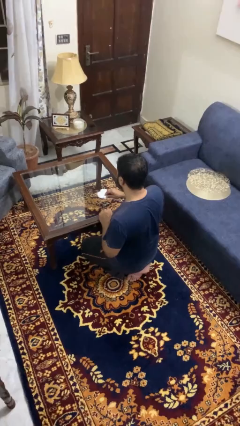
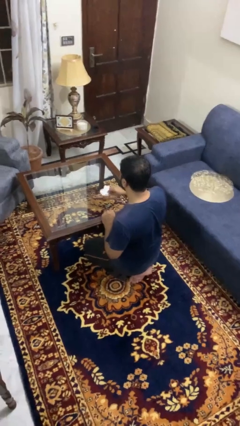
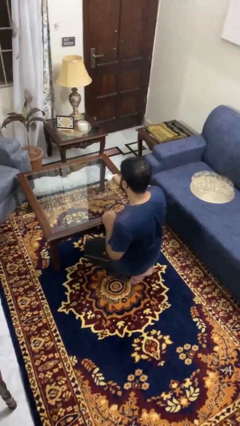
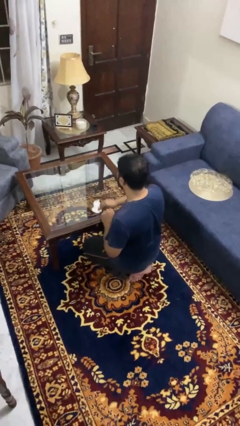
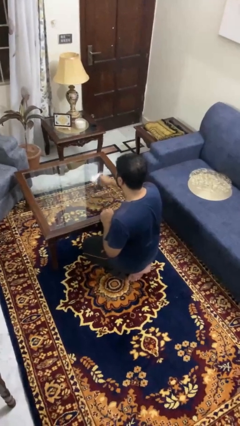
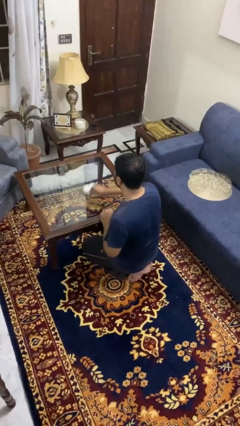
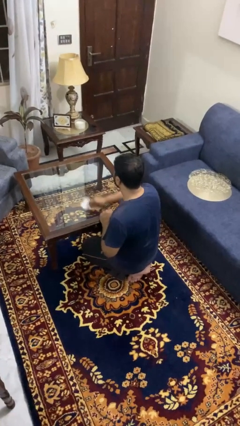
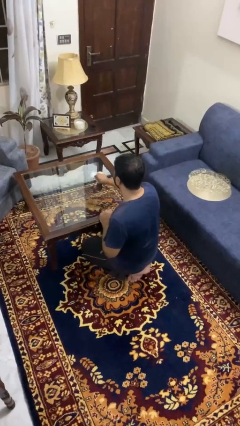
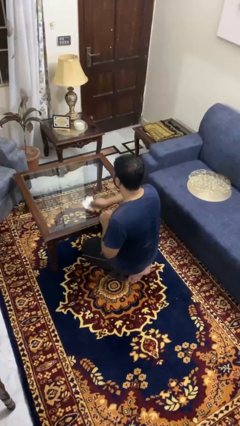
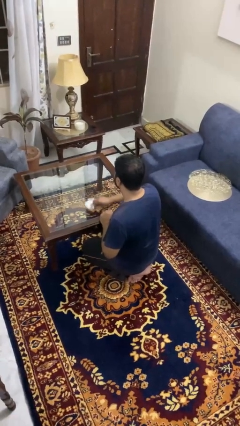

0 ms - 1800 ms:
person cleans table with rag

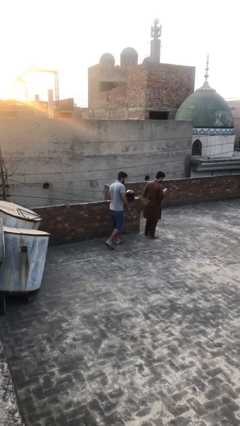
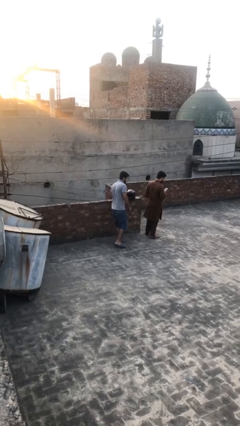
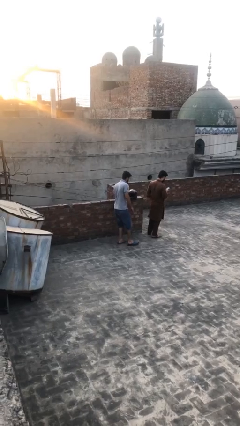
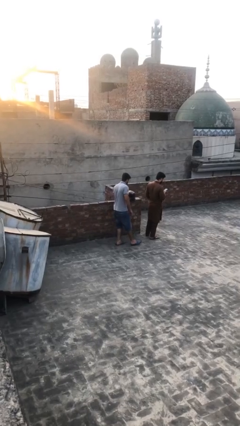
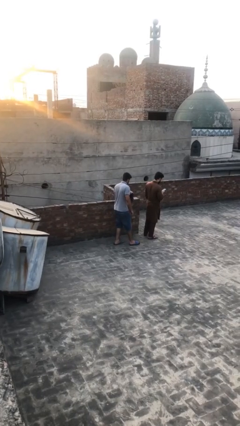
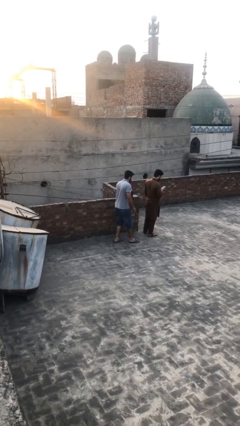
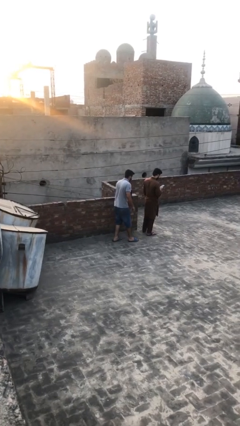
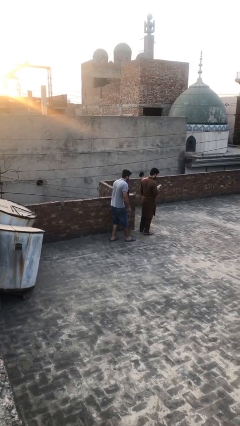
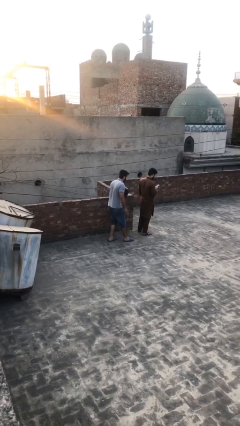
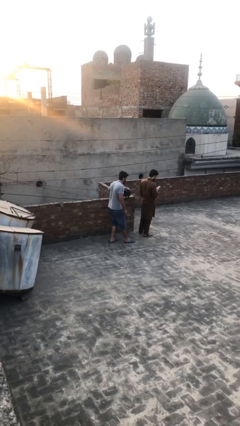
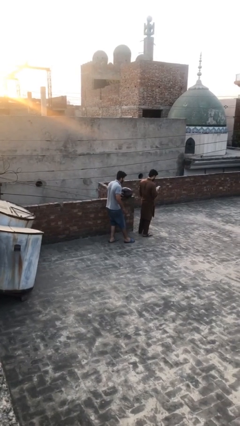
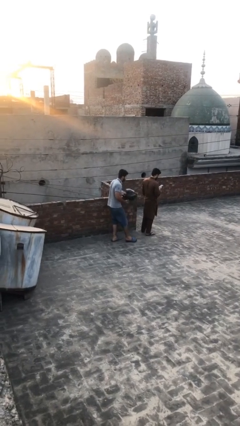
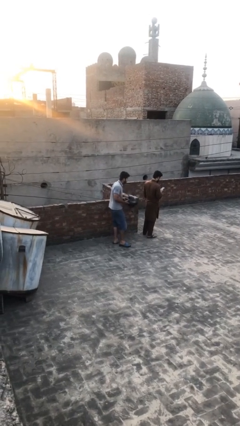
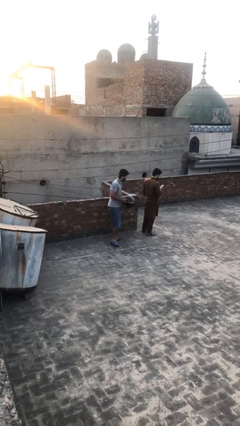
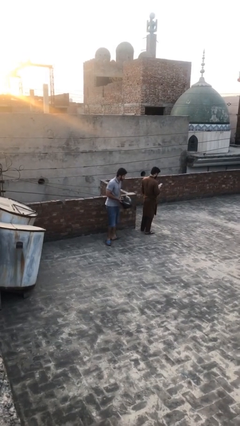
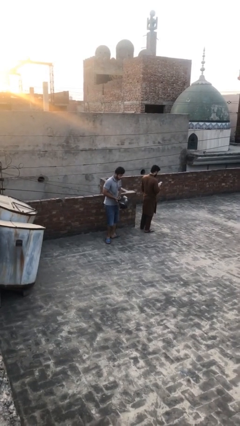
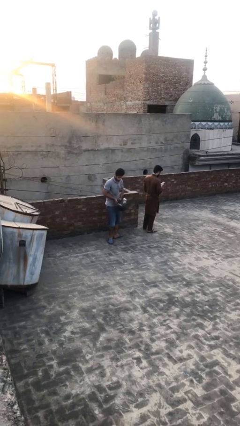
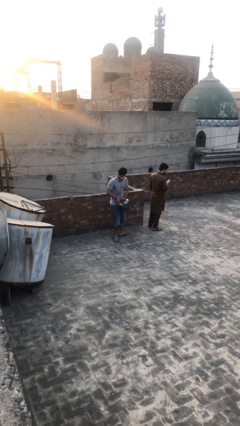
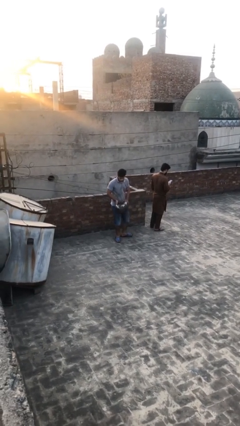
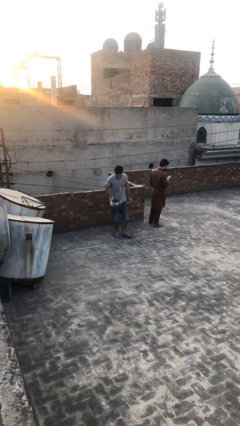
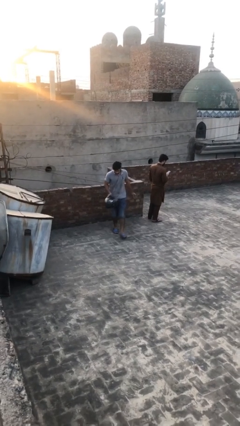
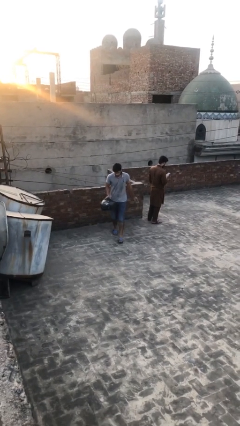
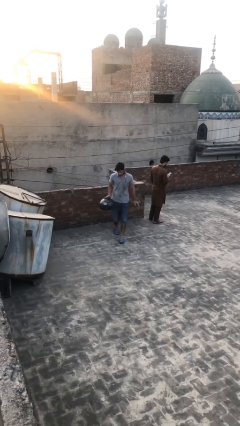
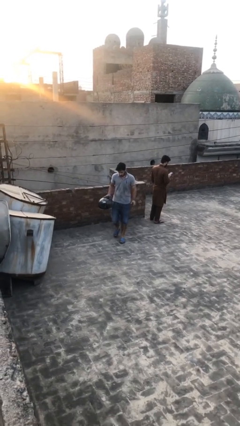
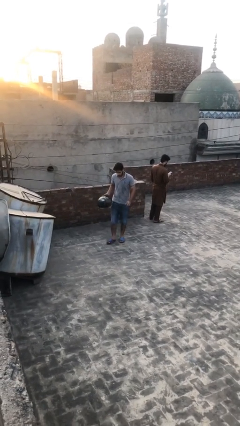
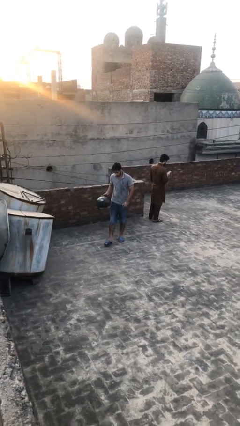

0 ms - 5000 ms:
person steals object from person

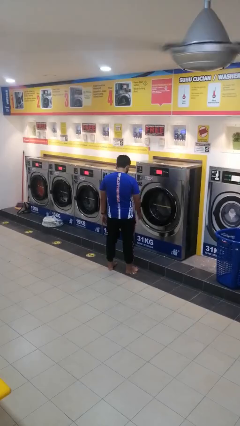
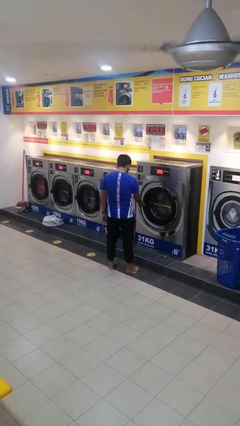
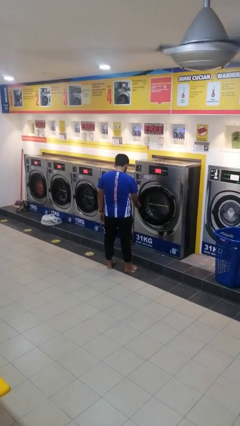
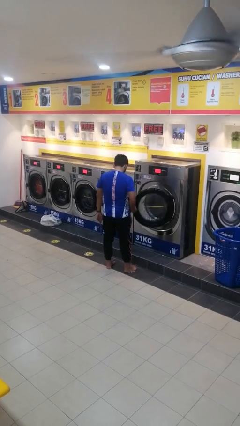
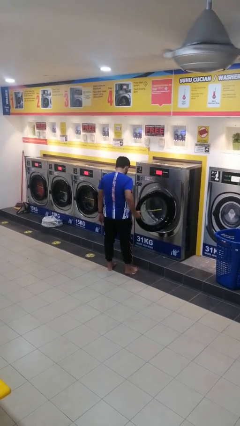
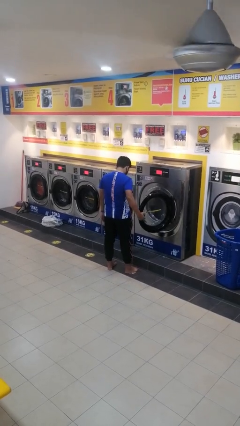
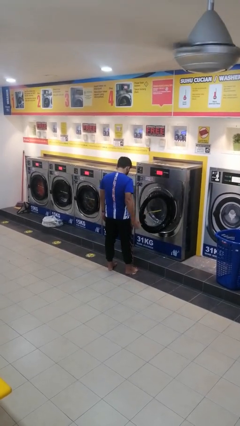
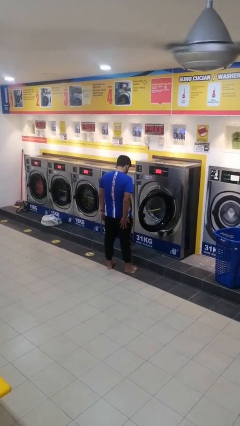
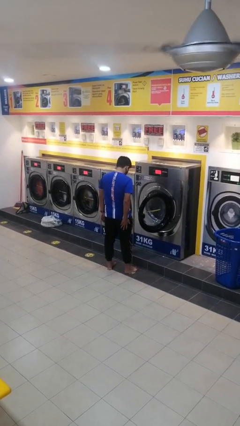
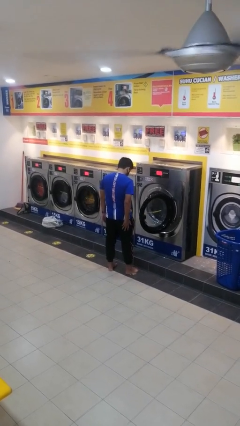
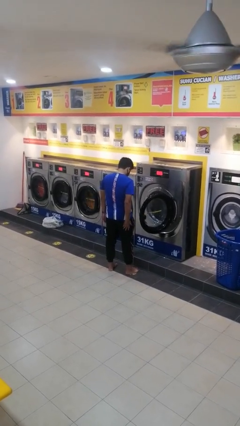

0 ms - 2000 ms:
person opens clothes washer

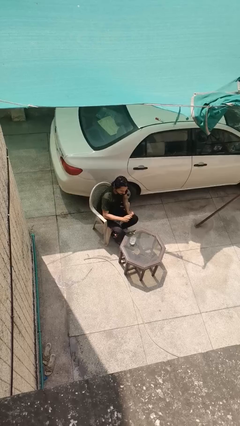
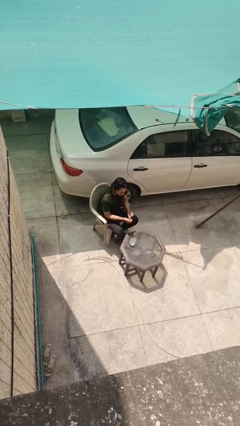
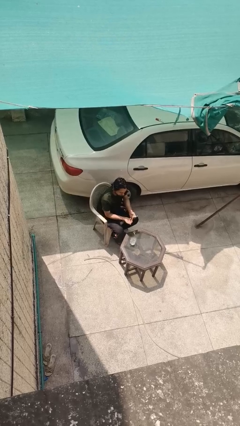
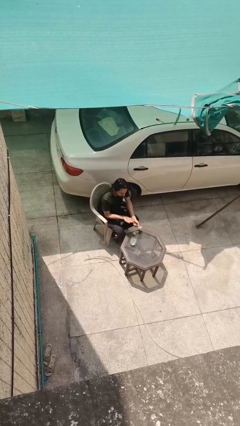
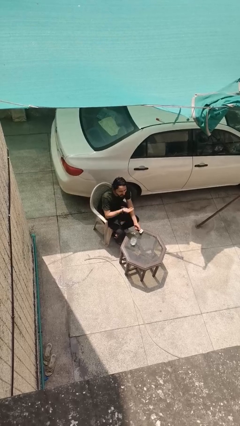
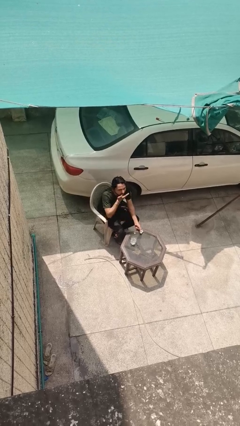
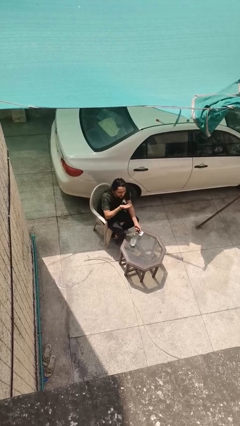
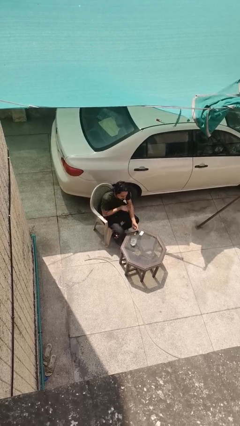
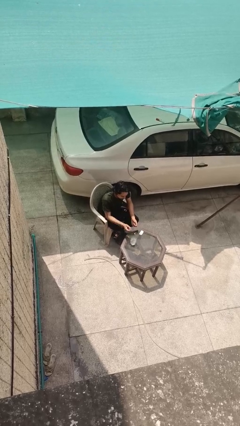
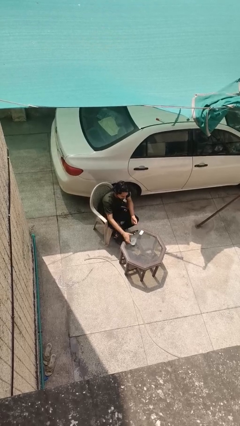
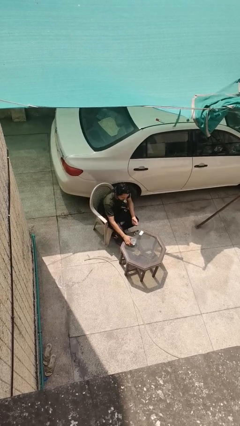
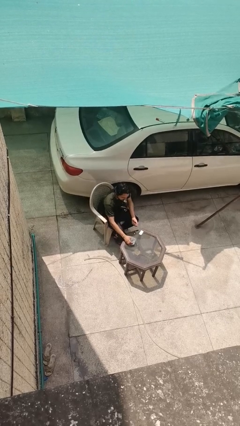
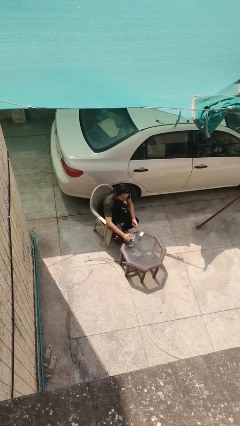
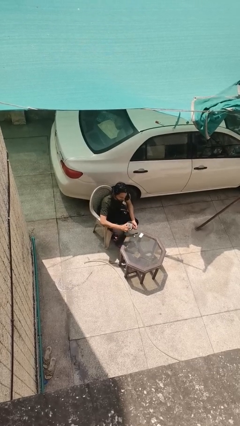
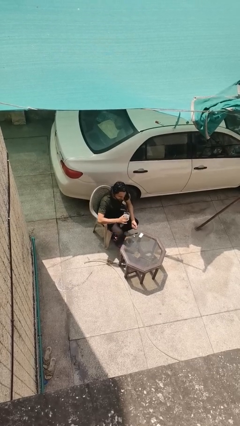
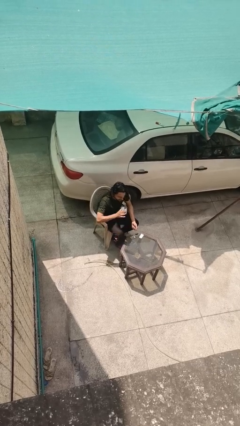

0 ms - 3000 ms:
person takes medicine pills

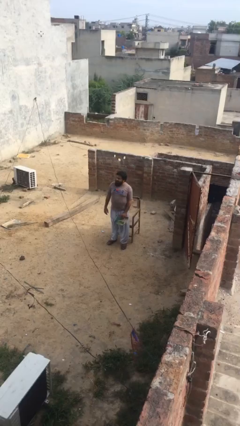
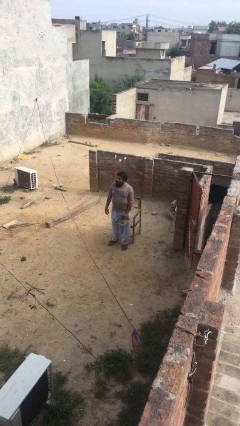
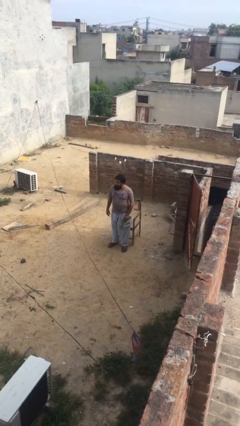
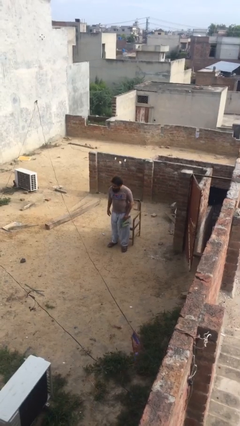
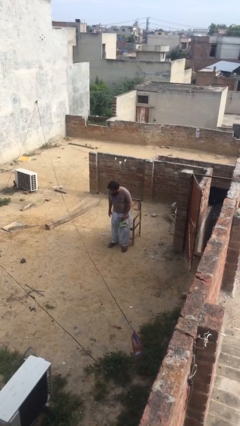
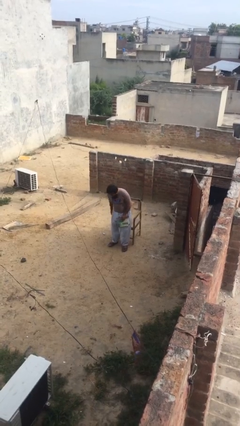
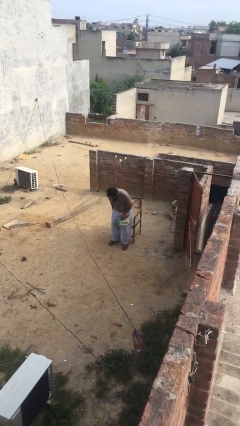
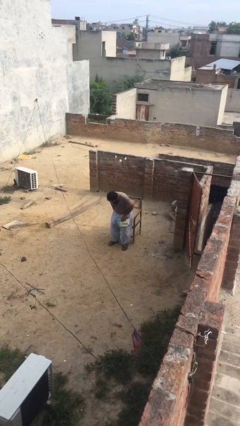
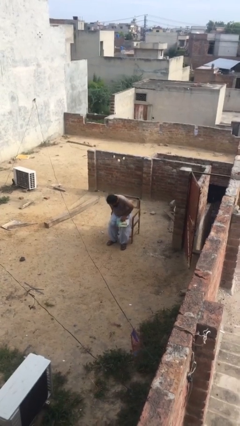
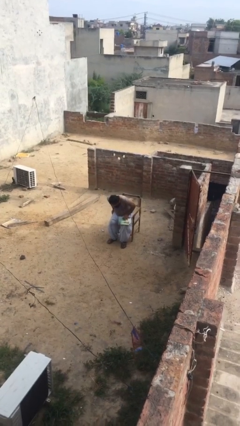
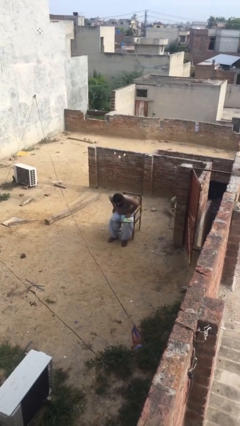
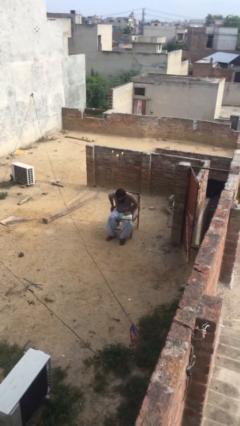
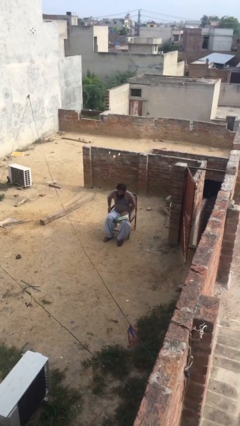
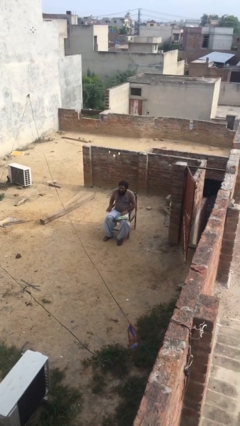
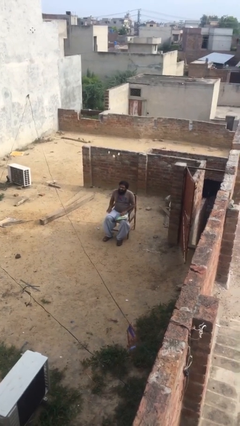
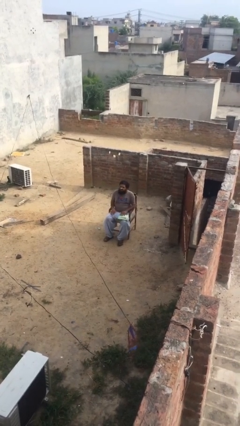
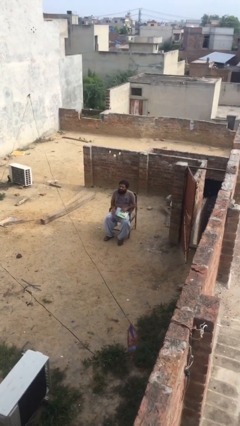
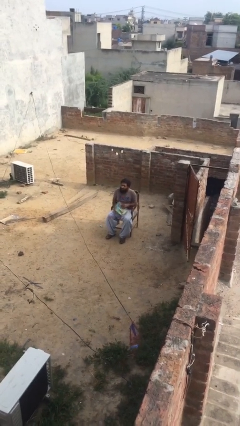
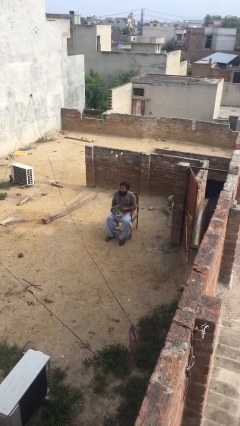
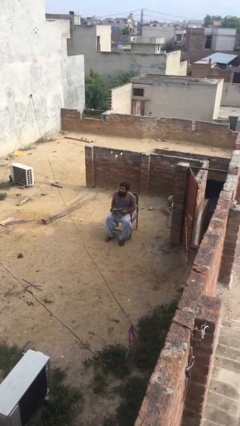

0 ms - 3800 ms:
person sits down

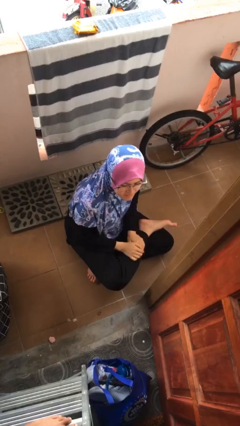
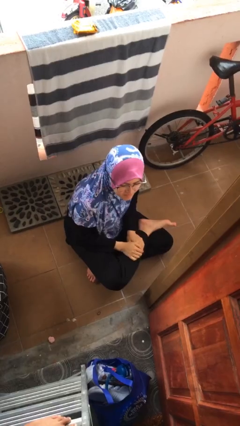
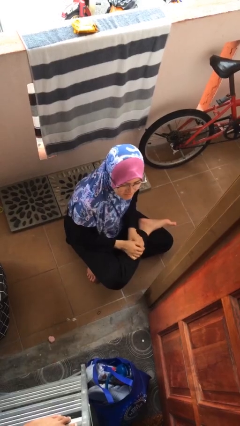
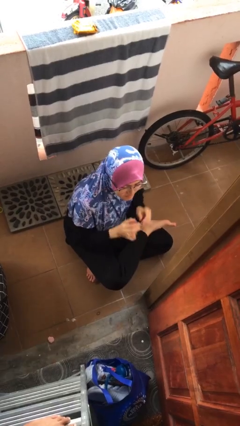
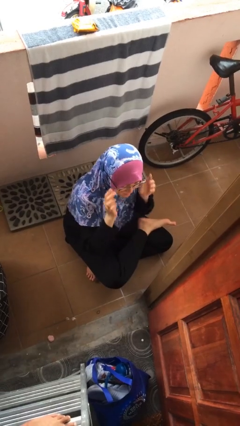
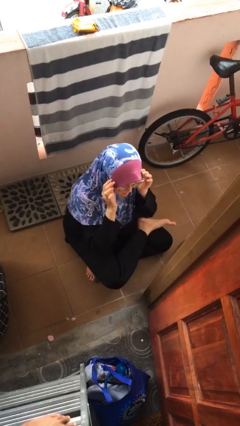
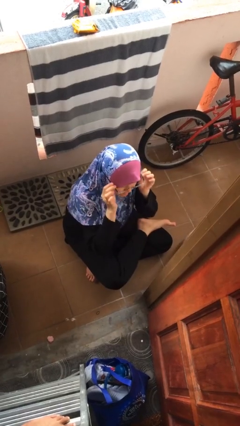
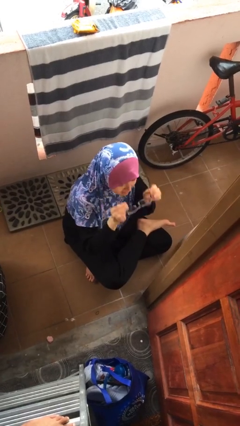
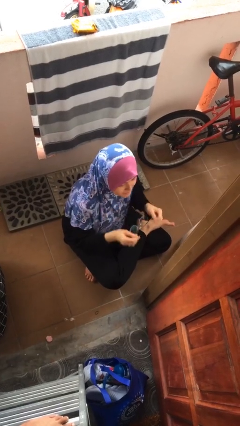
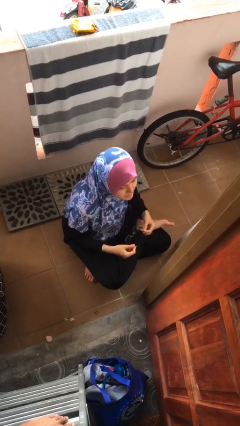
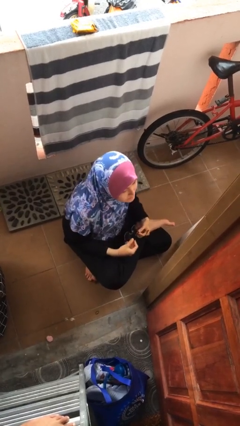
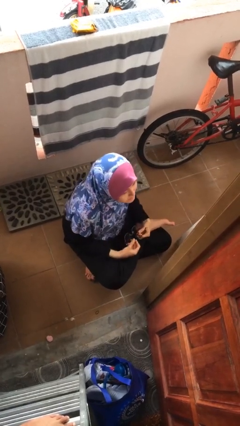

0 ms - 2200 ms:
person takes off glasses
